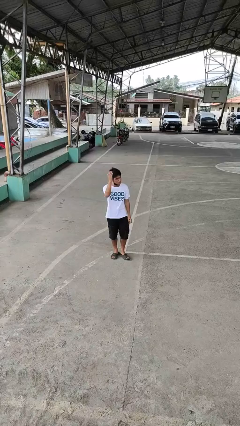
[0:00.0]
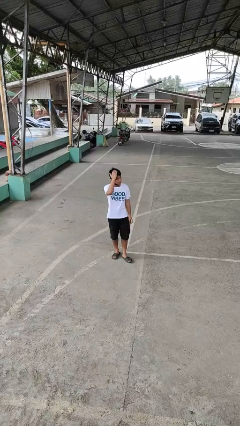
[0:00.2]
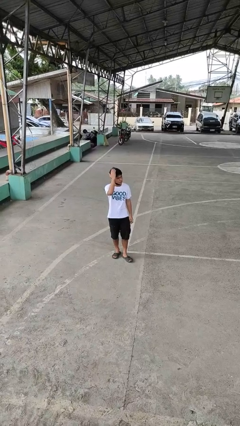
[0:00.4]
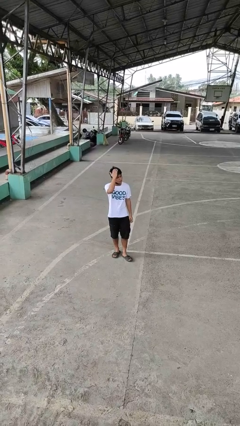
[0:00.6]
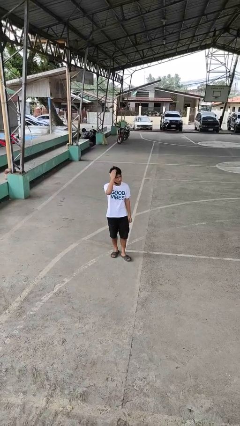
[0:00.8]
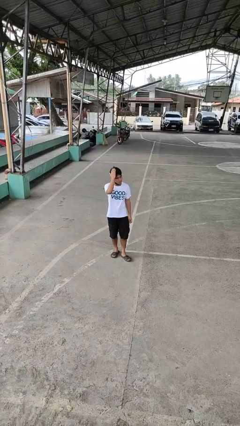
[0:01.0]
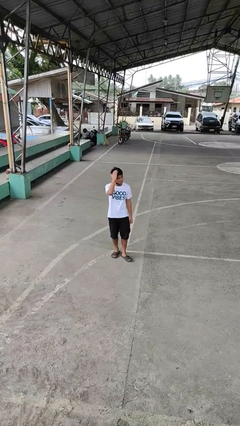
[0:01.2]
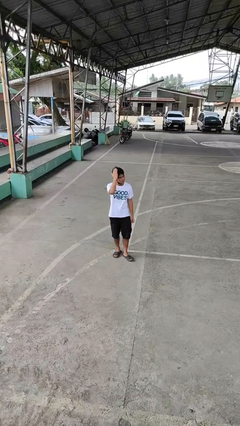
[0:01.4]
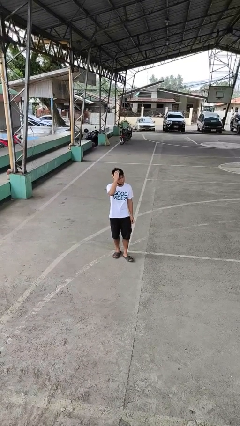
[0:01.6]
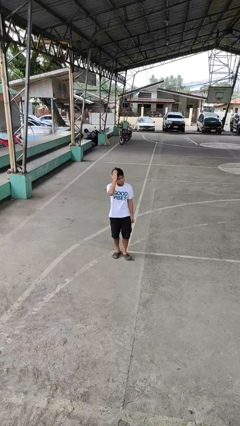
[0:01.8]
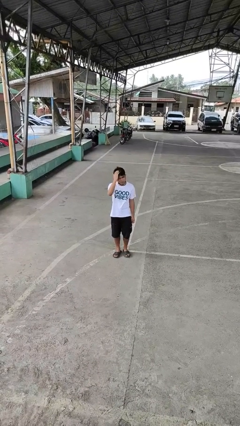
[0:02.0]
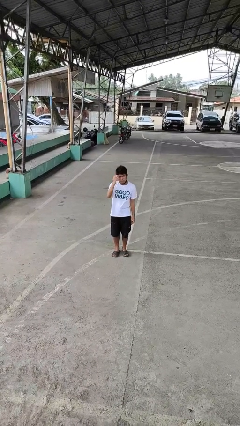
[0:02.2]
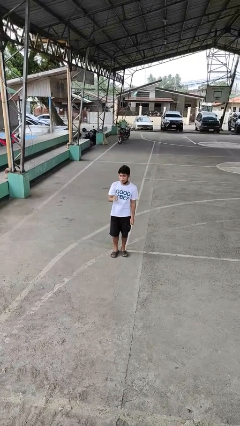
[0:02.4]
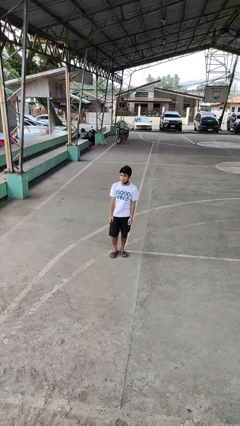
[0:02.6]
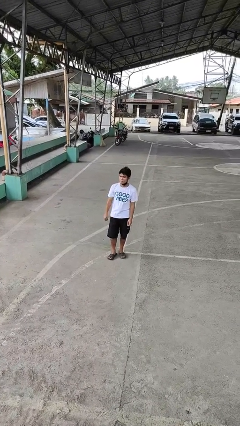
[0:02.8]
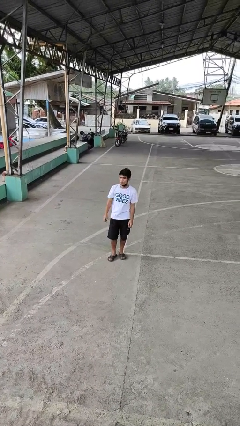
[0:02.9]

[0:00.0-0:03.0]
person pats head

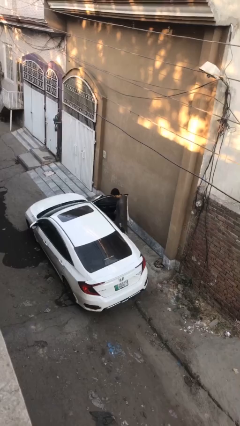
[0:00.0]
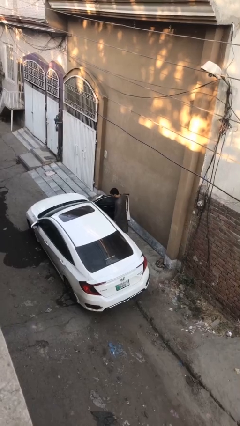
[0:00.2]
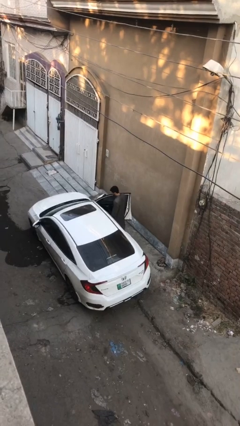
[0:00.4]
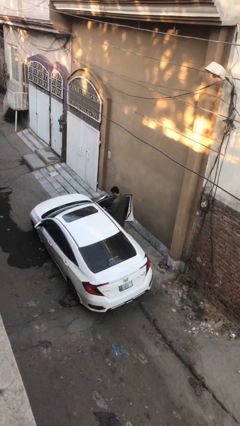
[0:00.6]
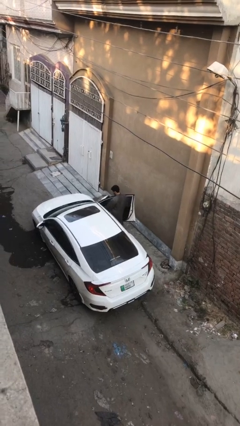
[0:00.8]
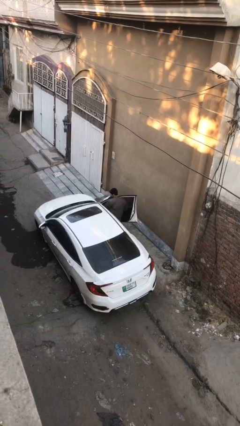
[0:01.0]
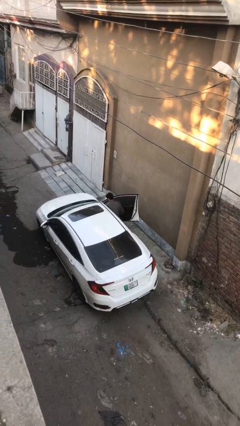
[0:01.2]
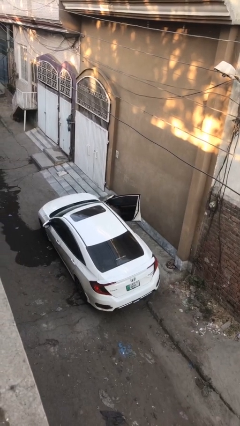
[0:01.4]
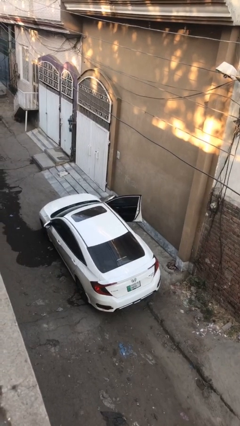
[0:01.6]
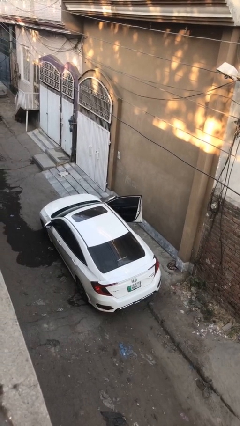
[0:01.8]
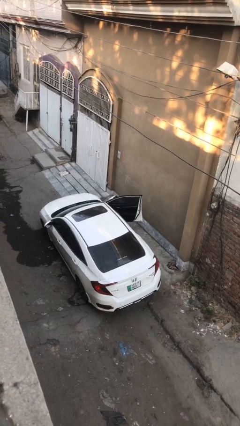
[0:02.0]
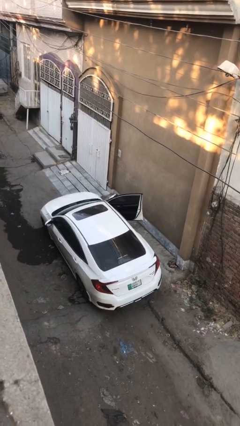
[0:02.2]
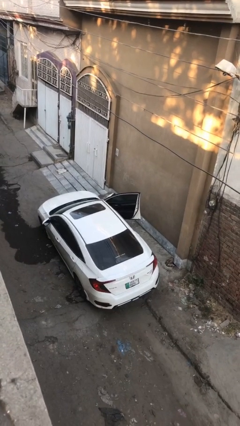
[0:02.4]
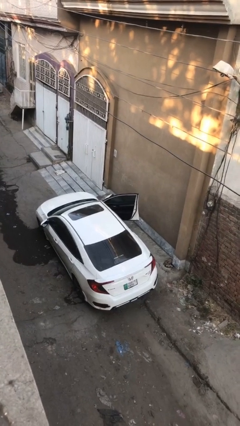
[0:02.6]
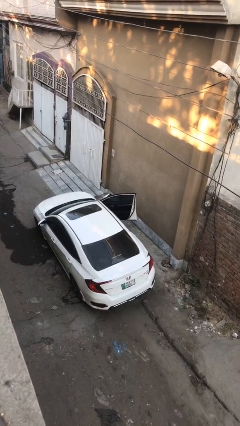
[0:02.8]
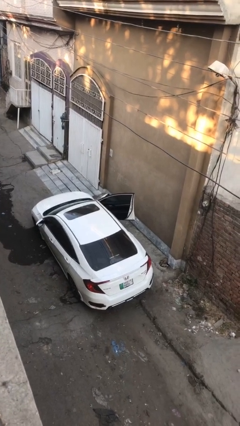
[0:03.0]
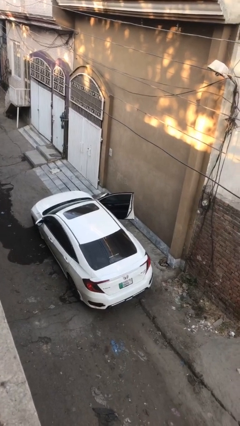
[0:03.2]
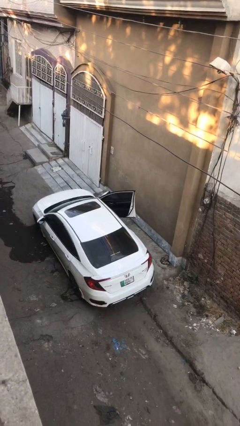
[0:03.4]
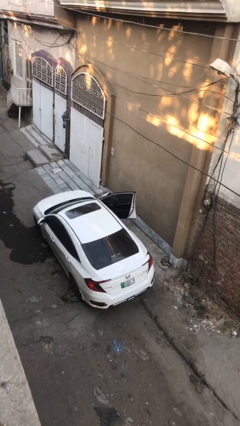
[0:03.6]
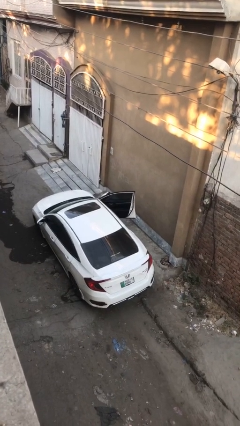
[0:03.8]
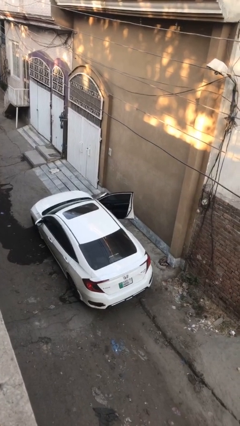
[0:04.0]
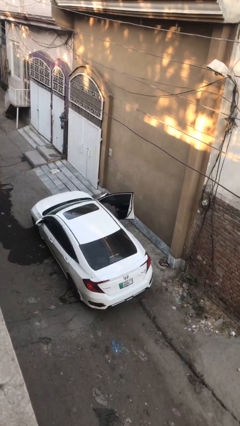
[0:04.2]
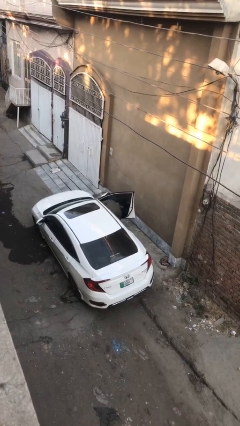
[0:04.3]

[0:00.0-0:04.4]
person enters car

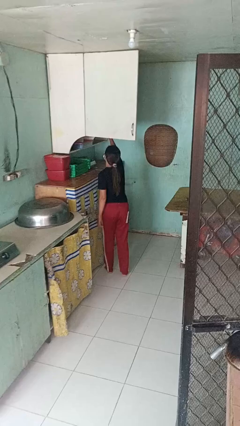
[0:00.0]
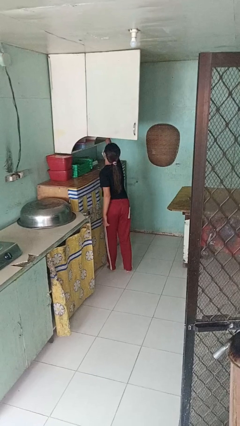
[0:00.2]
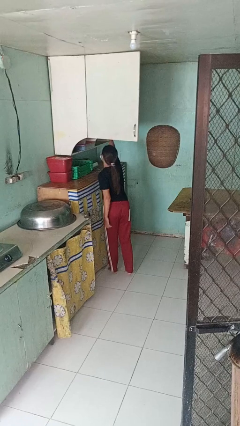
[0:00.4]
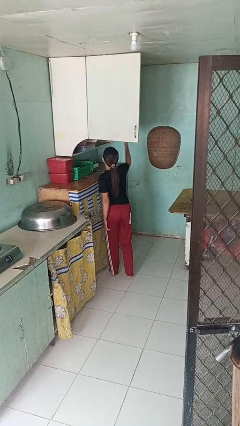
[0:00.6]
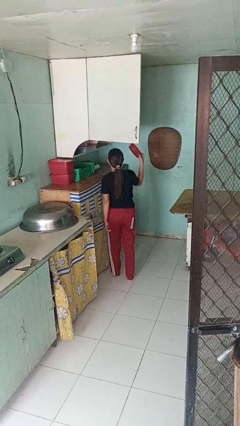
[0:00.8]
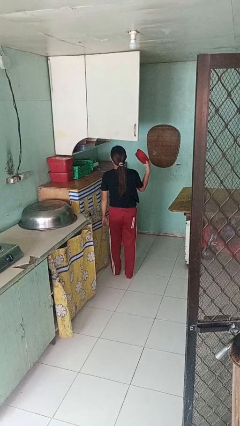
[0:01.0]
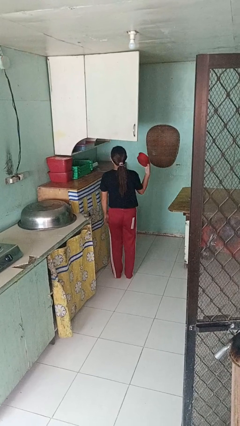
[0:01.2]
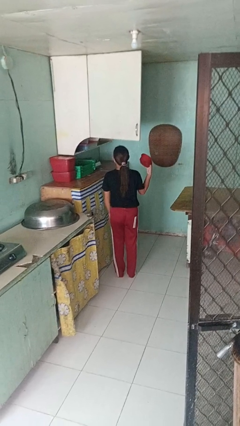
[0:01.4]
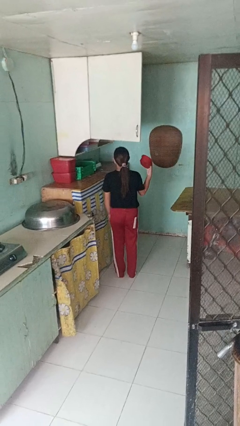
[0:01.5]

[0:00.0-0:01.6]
person takes object from cabinet

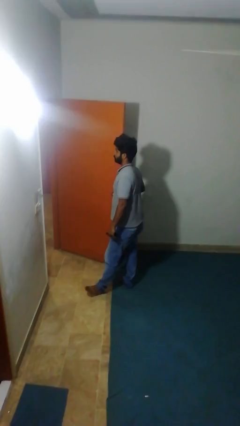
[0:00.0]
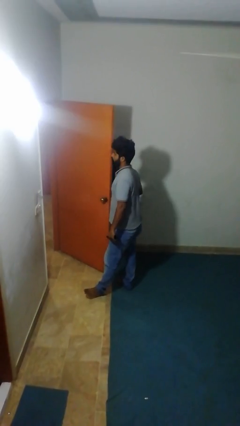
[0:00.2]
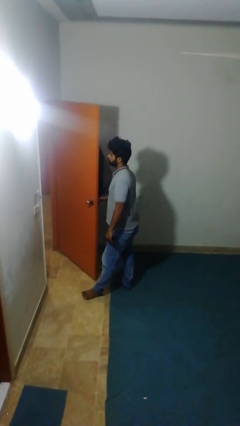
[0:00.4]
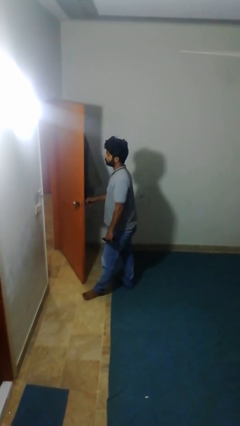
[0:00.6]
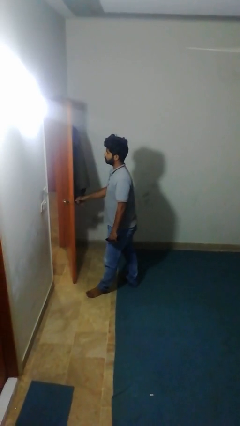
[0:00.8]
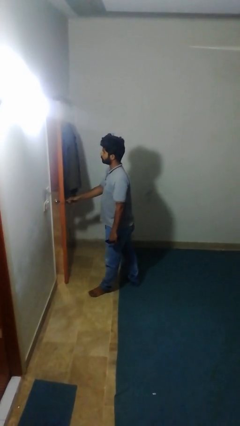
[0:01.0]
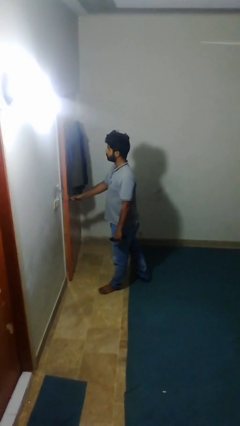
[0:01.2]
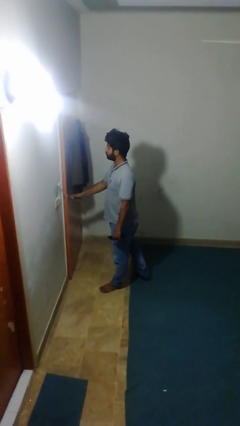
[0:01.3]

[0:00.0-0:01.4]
person closes facility door

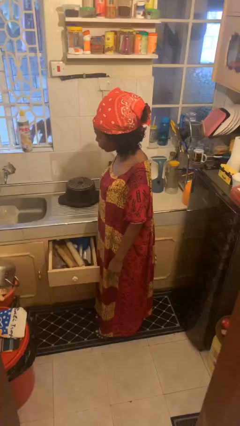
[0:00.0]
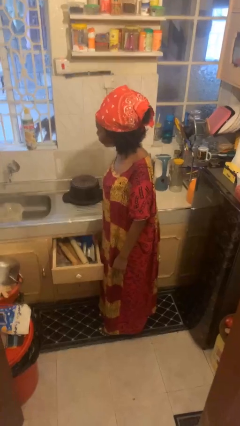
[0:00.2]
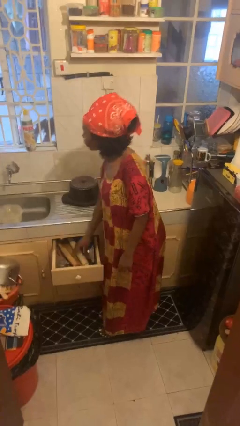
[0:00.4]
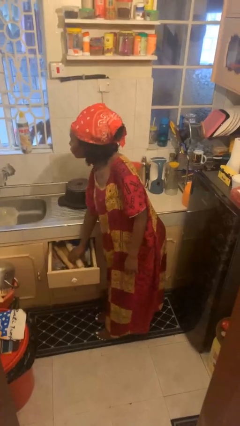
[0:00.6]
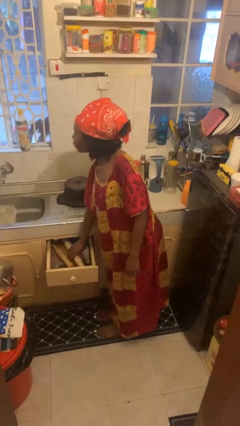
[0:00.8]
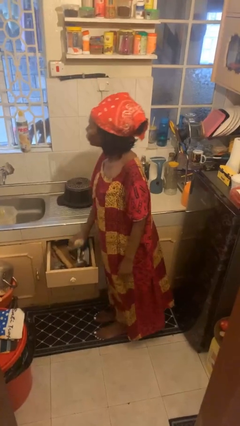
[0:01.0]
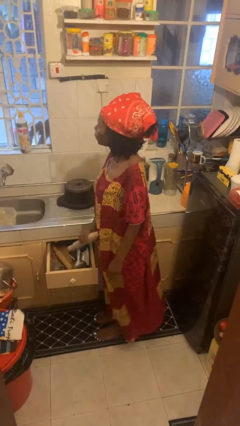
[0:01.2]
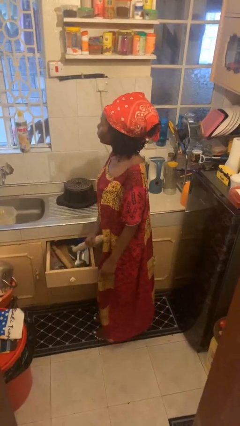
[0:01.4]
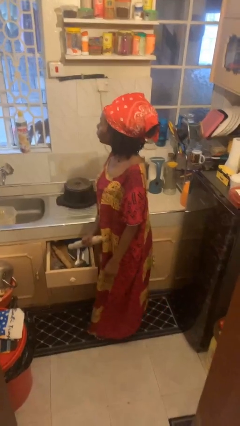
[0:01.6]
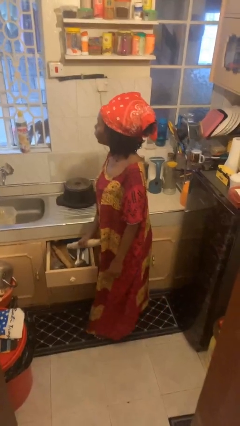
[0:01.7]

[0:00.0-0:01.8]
person takes object from kitchen drawer

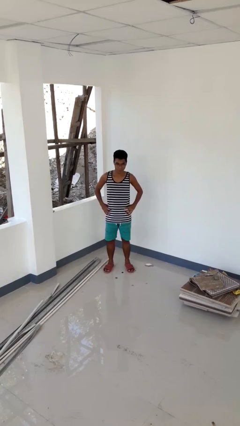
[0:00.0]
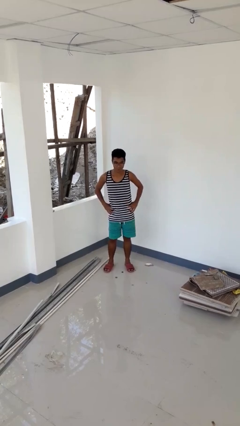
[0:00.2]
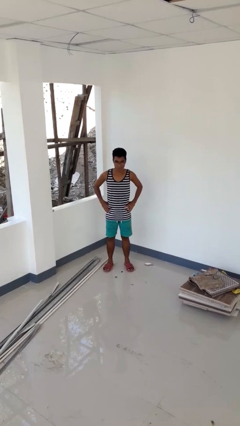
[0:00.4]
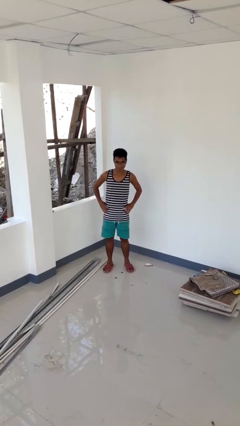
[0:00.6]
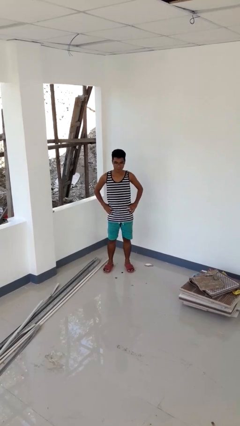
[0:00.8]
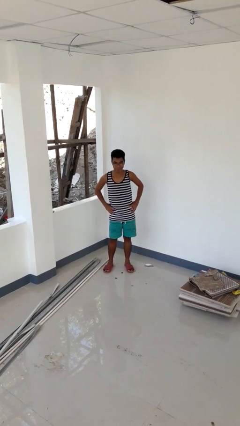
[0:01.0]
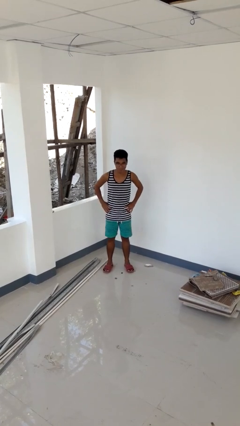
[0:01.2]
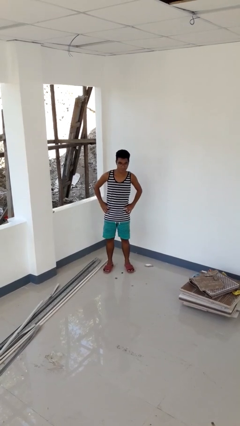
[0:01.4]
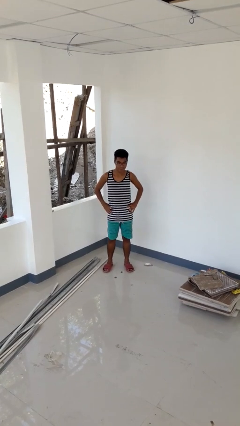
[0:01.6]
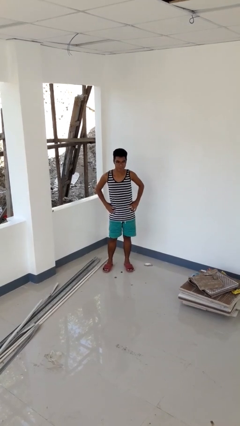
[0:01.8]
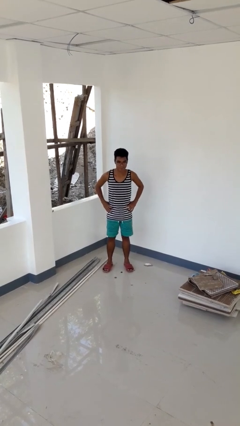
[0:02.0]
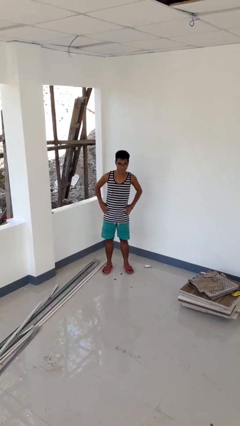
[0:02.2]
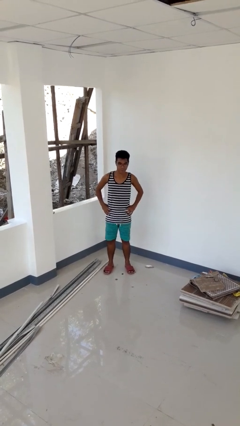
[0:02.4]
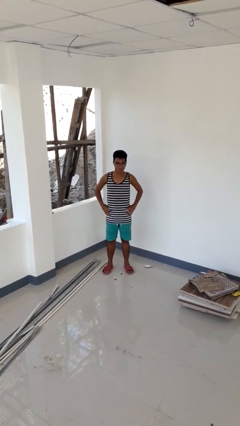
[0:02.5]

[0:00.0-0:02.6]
person wiggles hips

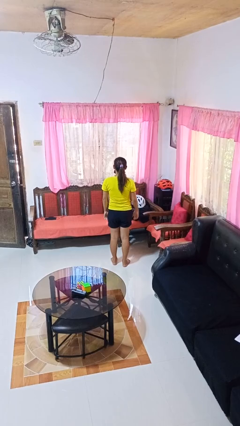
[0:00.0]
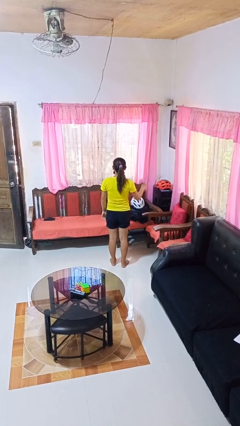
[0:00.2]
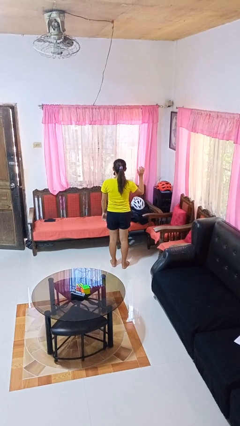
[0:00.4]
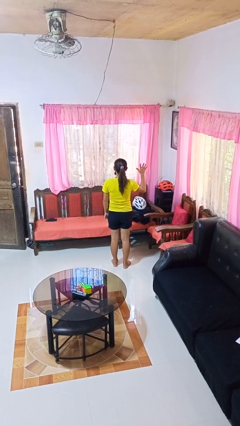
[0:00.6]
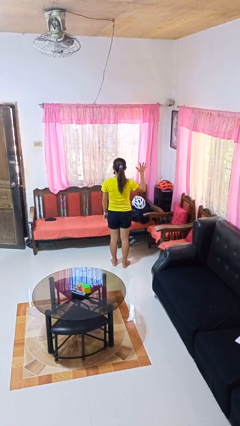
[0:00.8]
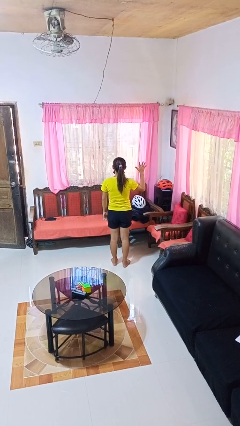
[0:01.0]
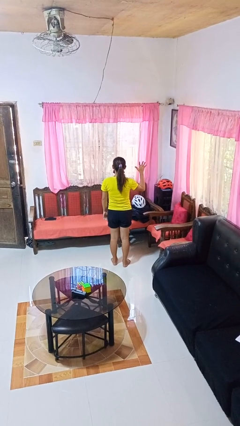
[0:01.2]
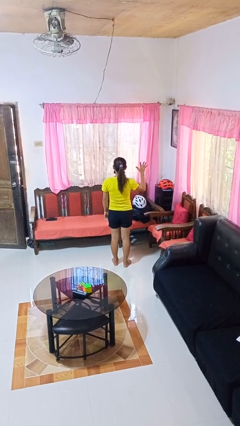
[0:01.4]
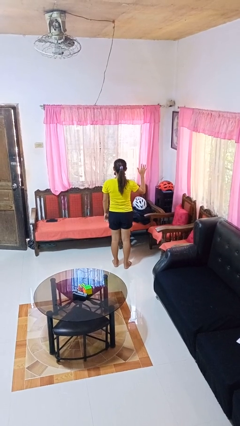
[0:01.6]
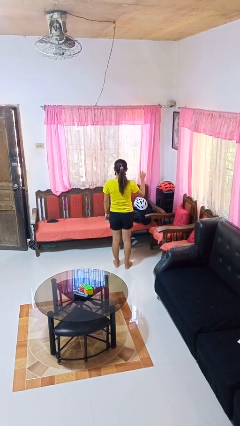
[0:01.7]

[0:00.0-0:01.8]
person gestures number five
